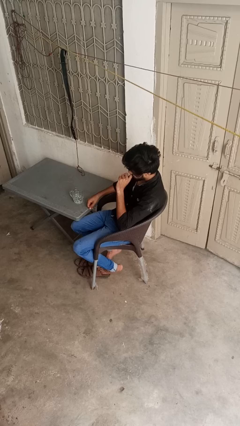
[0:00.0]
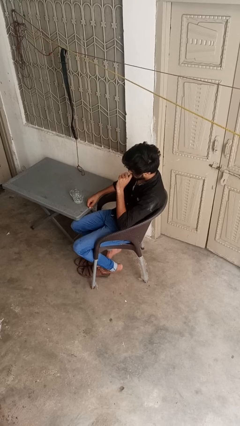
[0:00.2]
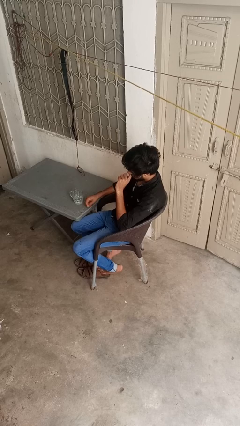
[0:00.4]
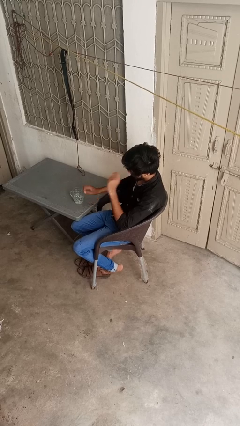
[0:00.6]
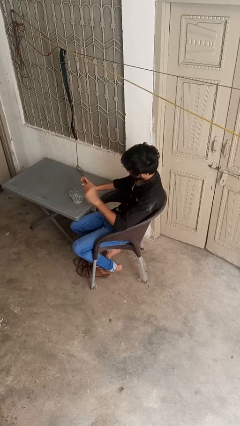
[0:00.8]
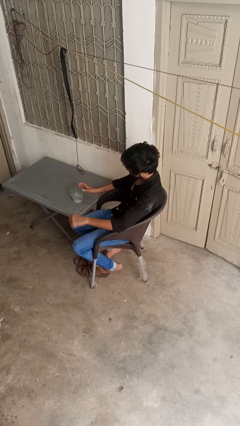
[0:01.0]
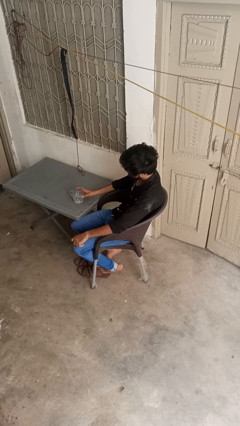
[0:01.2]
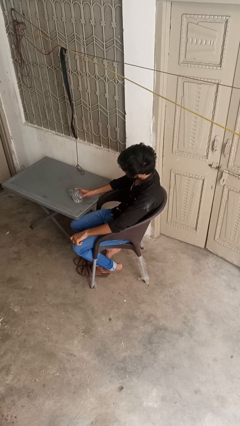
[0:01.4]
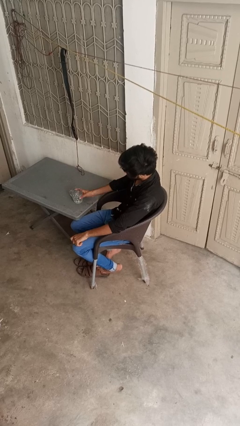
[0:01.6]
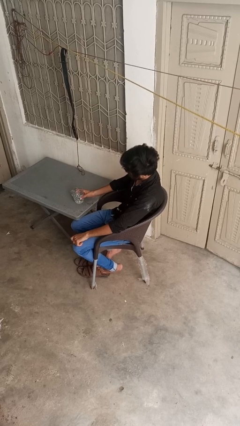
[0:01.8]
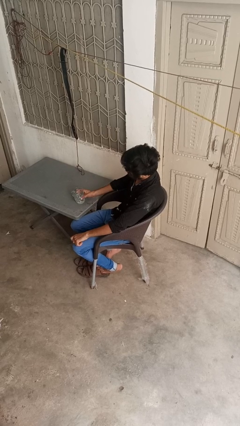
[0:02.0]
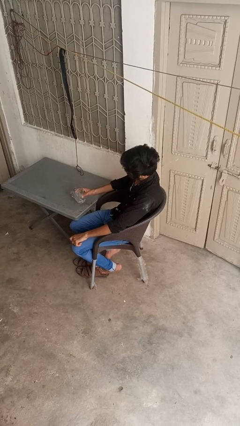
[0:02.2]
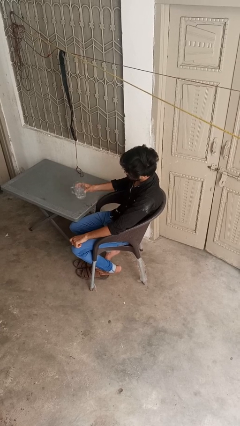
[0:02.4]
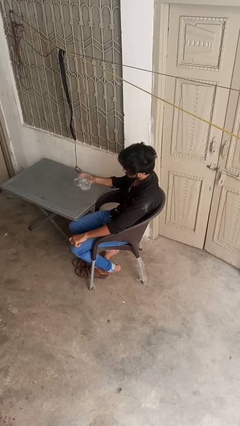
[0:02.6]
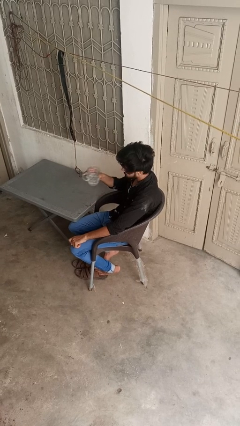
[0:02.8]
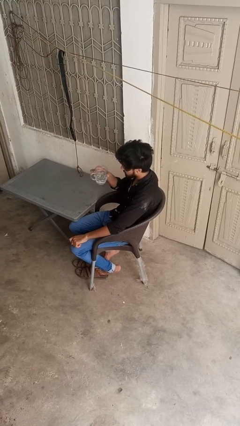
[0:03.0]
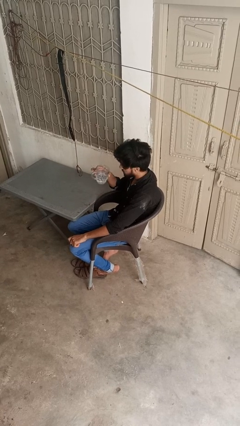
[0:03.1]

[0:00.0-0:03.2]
person picks up object from table

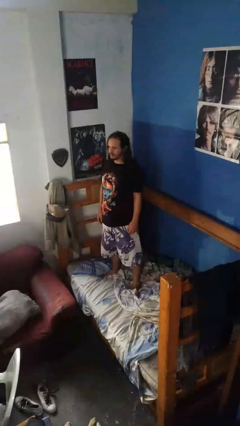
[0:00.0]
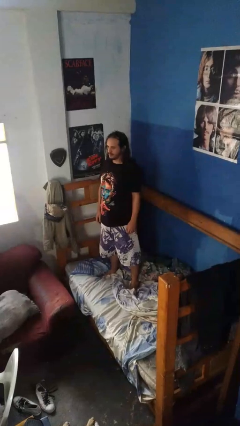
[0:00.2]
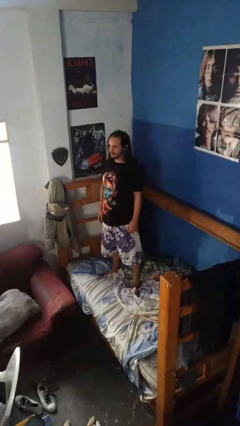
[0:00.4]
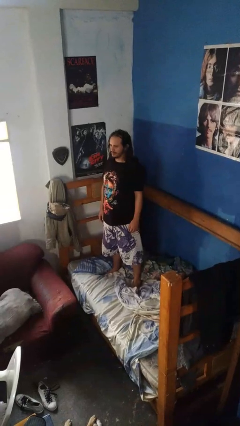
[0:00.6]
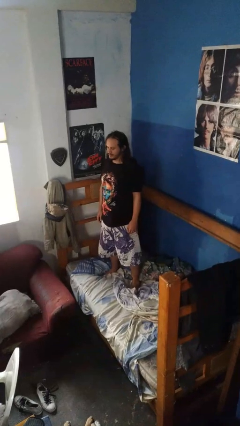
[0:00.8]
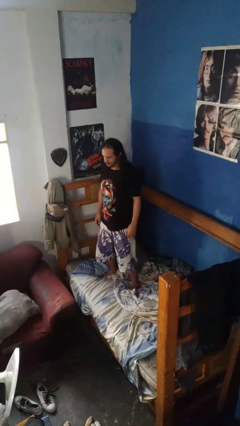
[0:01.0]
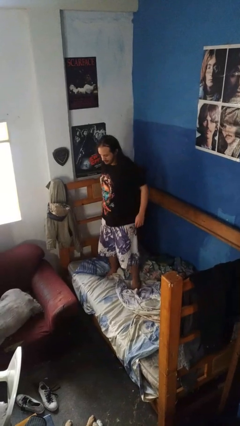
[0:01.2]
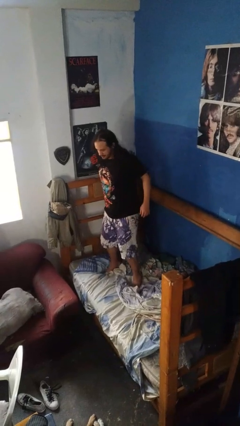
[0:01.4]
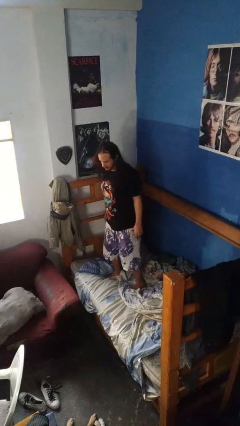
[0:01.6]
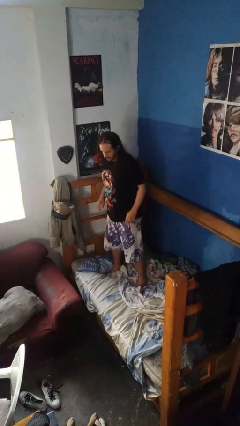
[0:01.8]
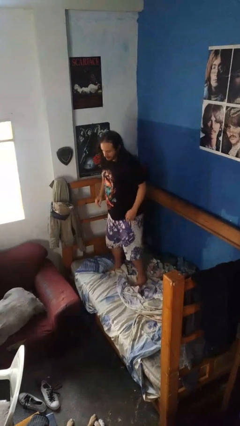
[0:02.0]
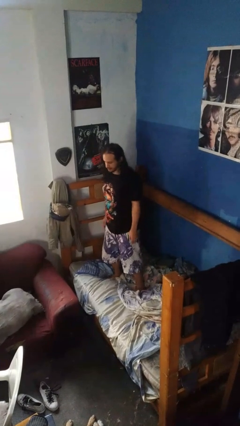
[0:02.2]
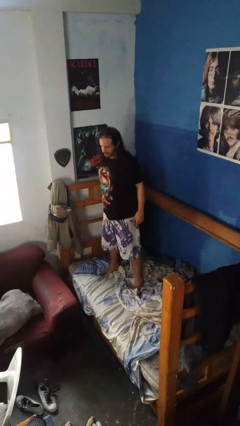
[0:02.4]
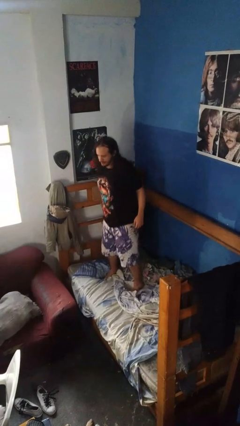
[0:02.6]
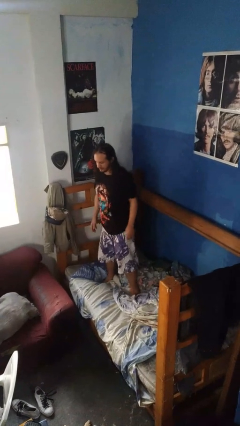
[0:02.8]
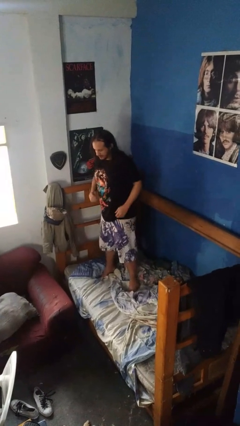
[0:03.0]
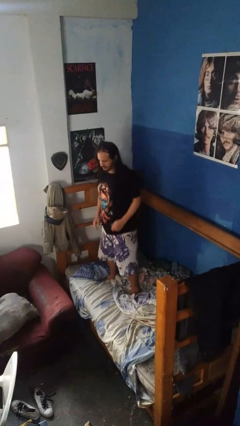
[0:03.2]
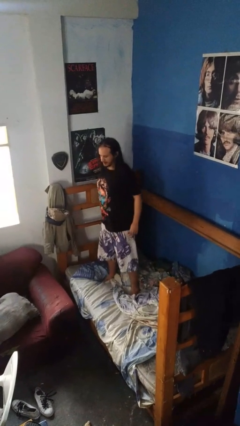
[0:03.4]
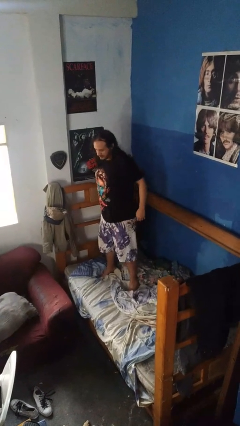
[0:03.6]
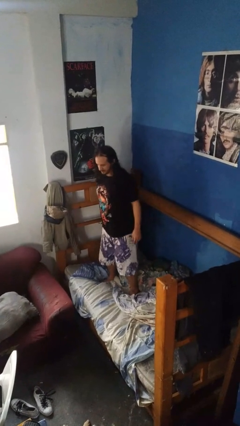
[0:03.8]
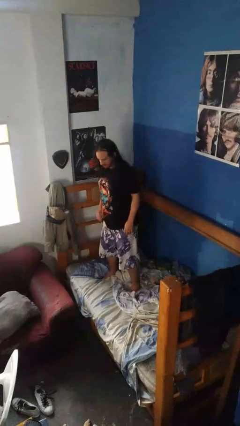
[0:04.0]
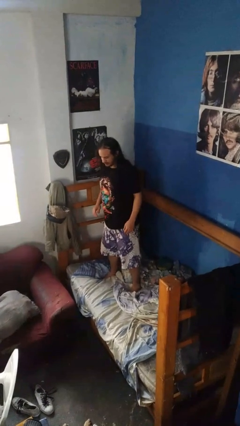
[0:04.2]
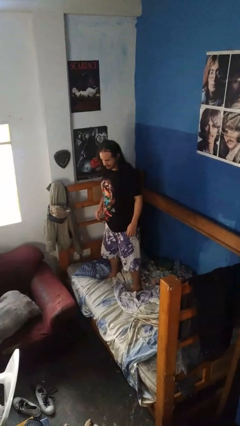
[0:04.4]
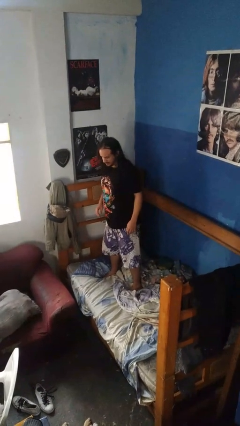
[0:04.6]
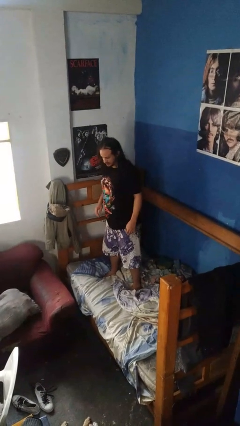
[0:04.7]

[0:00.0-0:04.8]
person jumps on bed

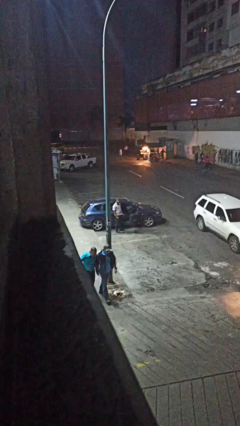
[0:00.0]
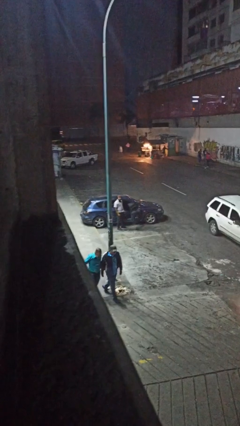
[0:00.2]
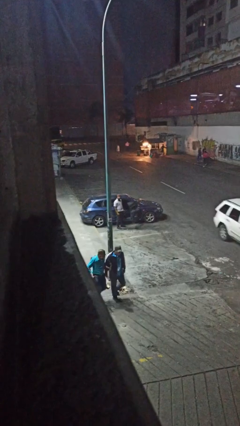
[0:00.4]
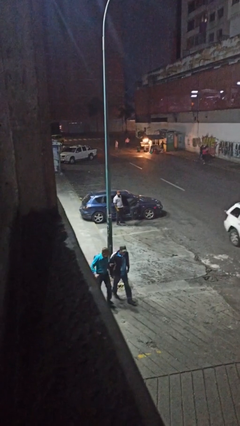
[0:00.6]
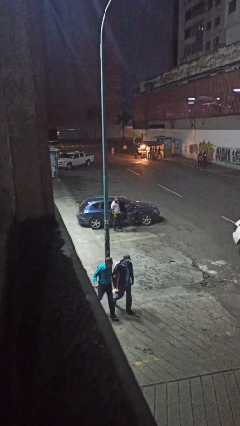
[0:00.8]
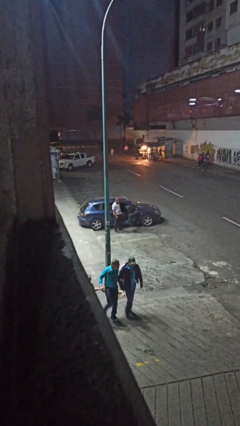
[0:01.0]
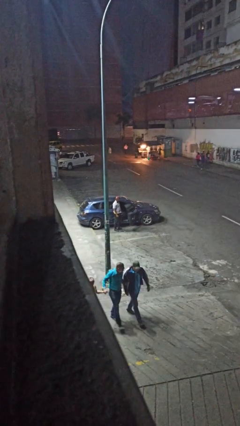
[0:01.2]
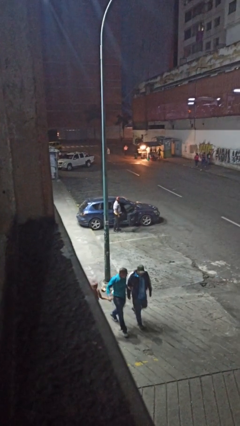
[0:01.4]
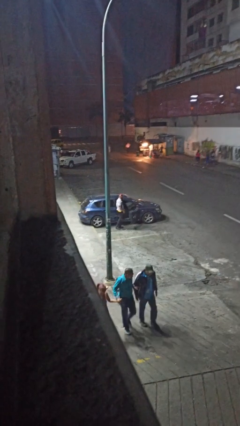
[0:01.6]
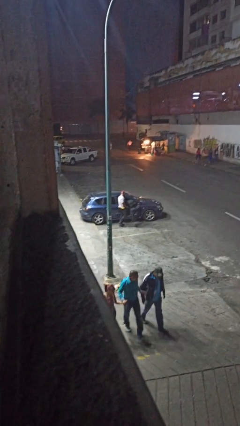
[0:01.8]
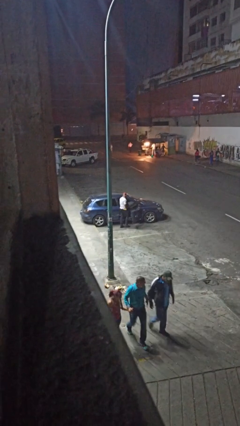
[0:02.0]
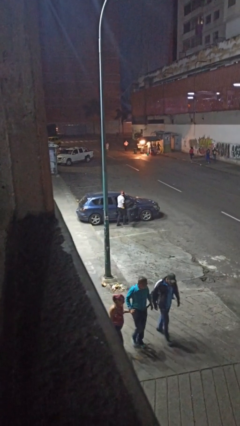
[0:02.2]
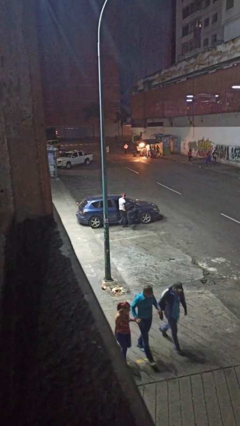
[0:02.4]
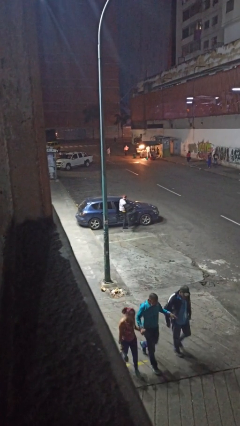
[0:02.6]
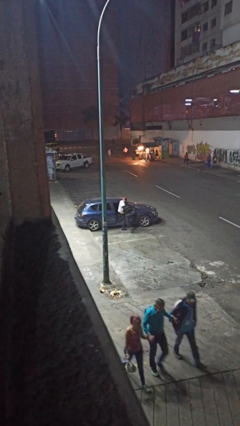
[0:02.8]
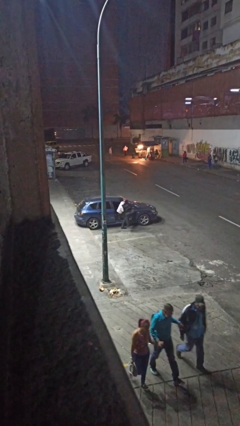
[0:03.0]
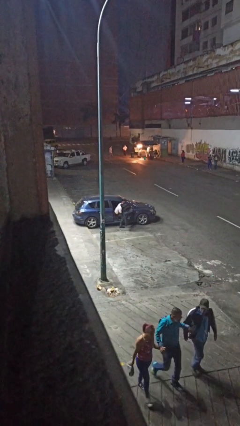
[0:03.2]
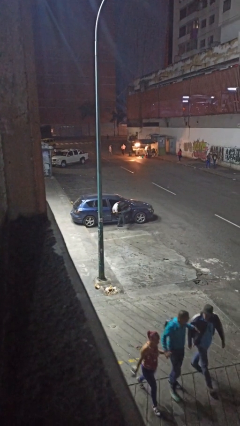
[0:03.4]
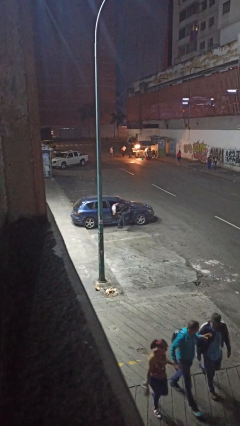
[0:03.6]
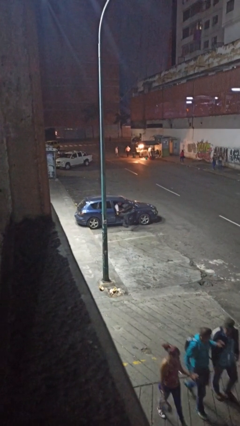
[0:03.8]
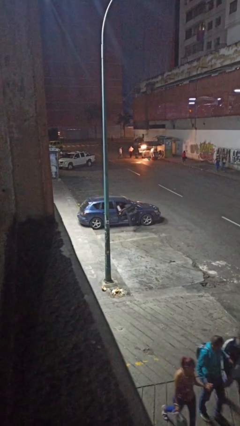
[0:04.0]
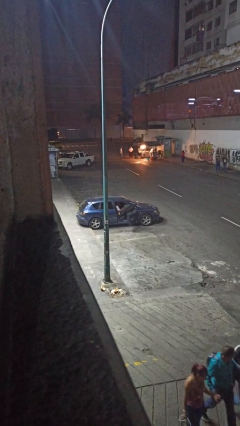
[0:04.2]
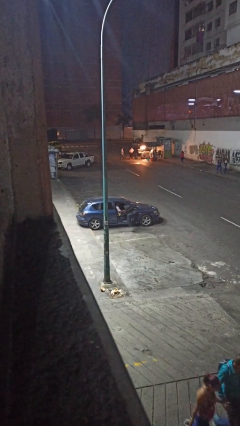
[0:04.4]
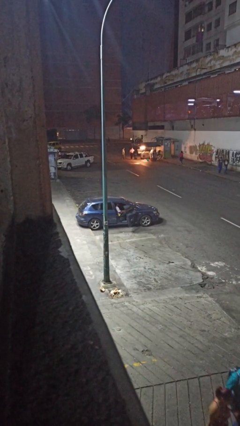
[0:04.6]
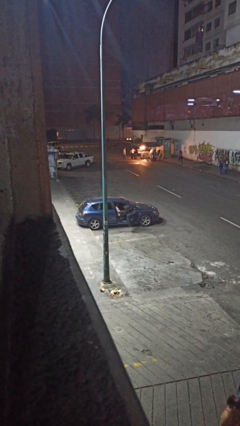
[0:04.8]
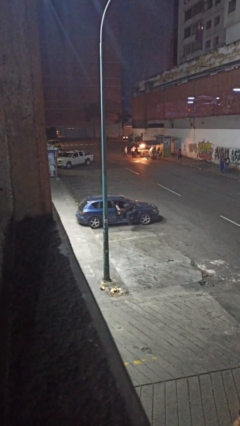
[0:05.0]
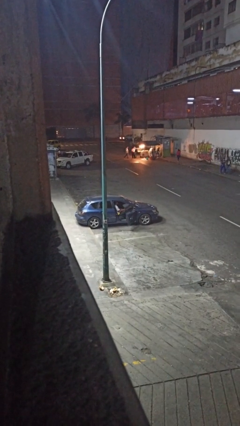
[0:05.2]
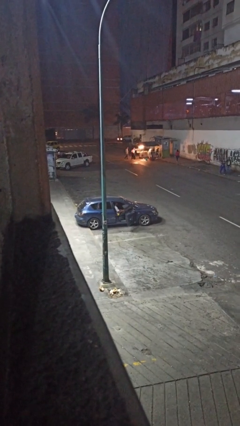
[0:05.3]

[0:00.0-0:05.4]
person enters car

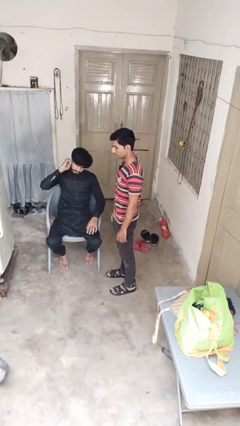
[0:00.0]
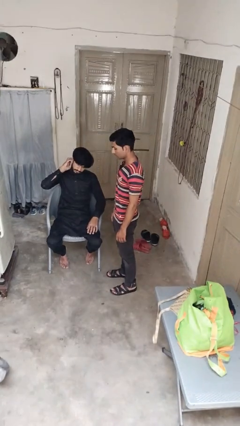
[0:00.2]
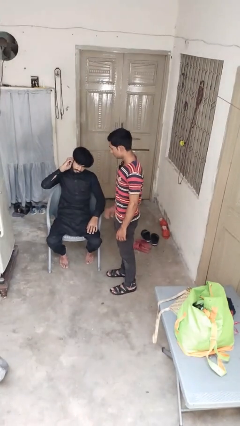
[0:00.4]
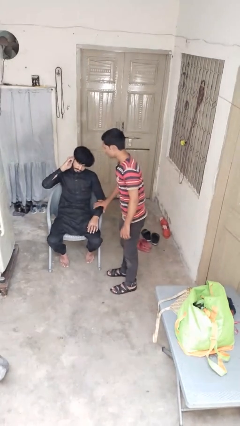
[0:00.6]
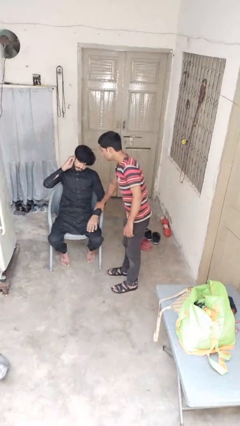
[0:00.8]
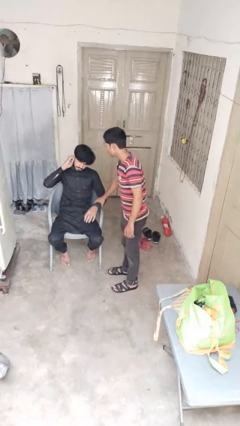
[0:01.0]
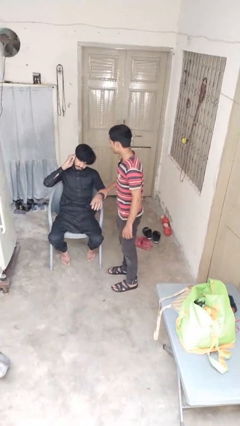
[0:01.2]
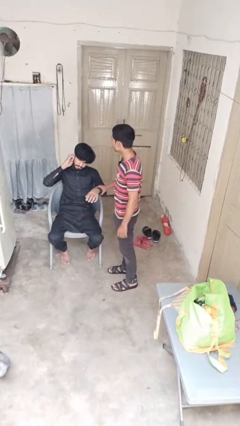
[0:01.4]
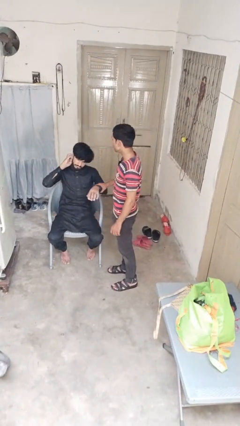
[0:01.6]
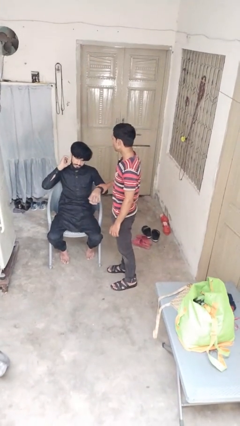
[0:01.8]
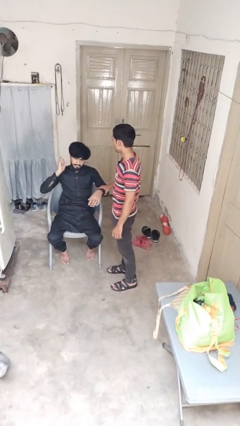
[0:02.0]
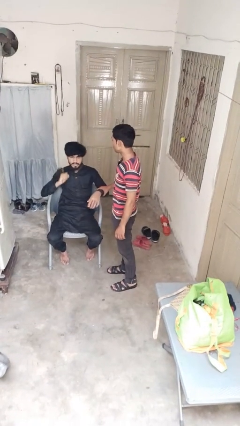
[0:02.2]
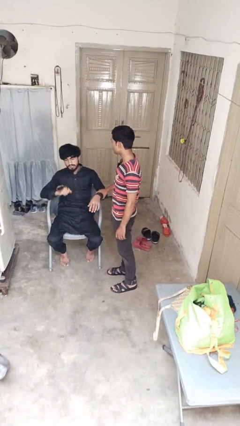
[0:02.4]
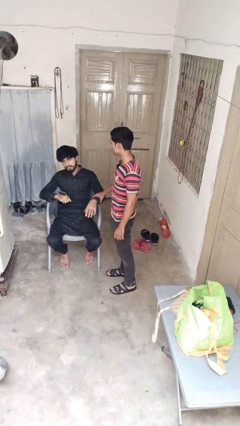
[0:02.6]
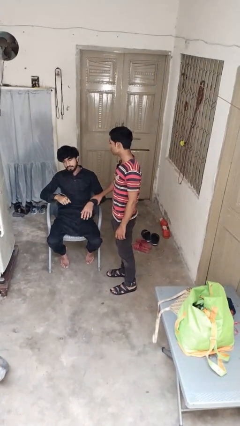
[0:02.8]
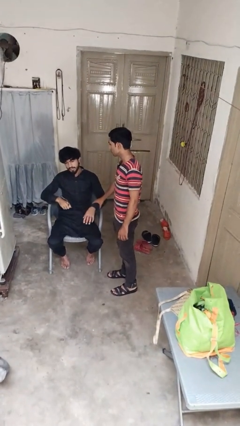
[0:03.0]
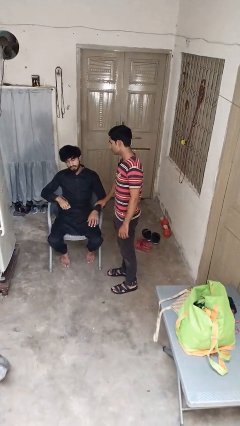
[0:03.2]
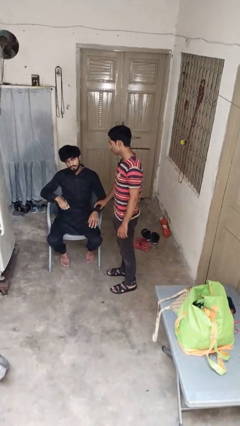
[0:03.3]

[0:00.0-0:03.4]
person grabs person by forearm

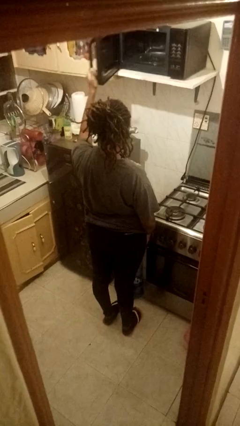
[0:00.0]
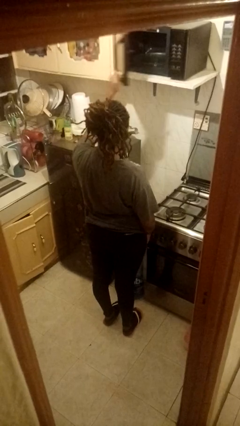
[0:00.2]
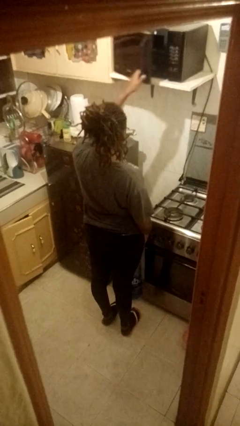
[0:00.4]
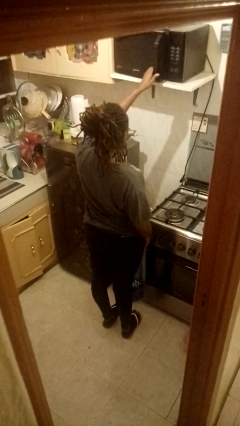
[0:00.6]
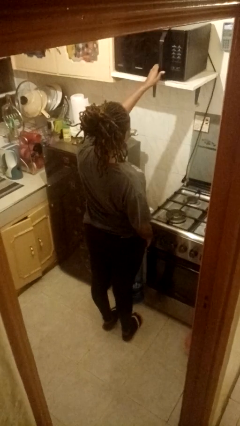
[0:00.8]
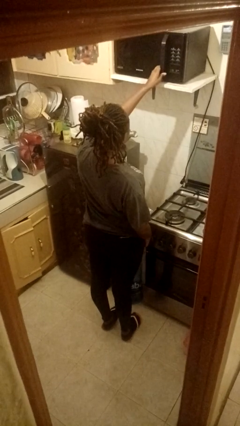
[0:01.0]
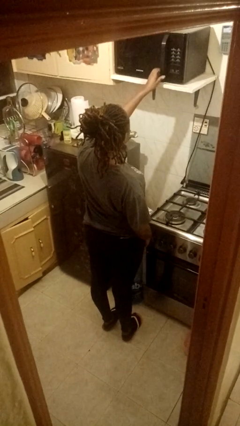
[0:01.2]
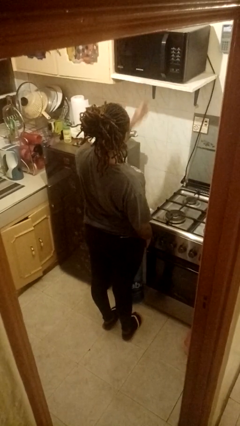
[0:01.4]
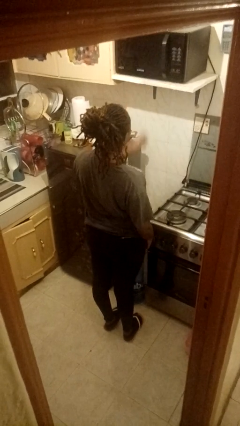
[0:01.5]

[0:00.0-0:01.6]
person closes microwave
